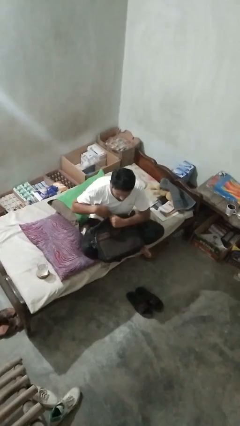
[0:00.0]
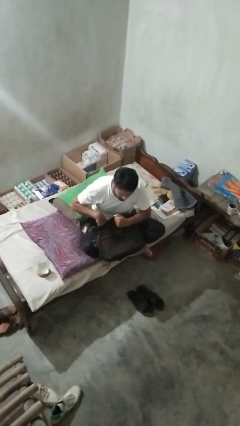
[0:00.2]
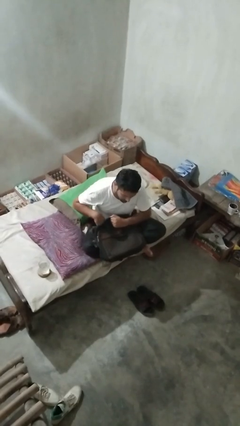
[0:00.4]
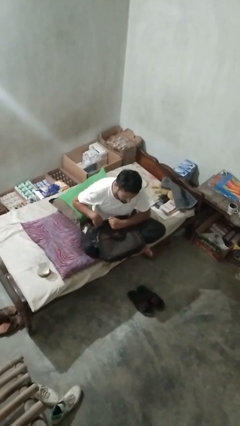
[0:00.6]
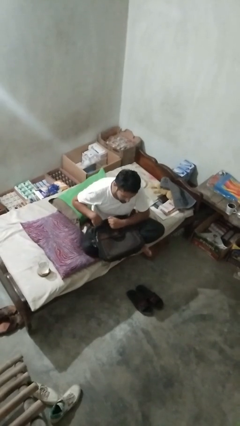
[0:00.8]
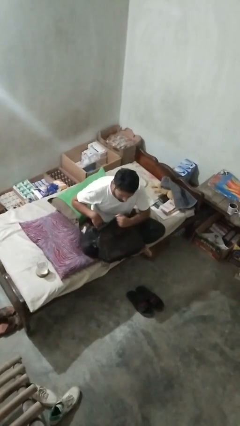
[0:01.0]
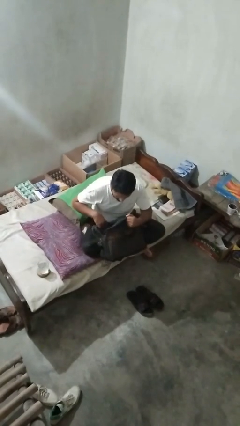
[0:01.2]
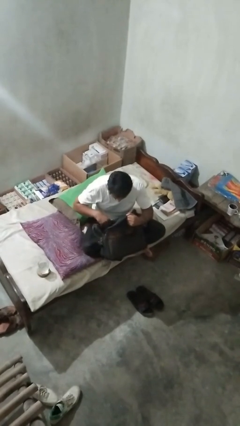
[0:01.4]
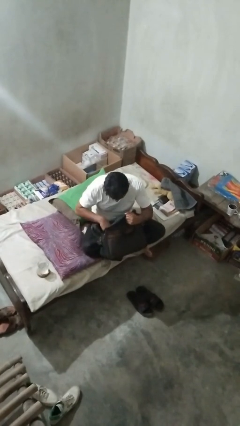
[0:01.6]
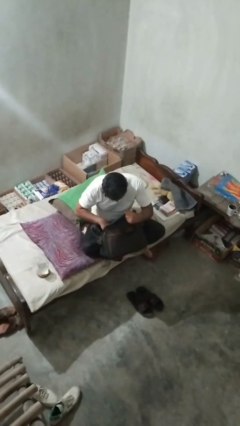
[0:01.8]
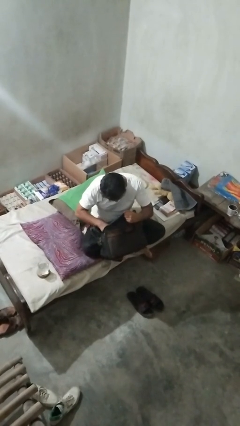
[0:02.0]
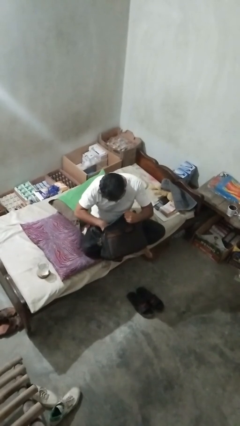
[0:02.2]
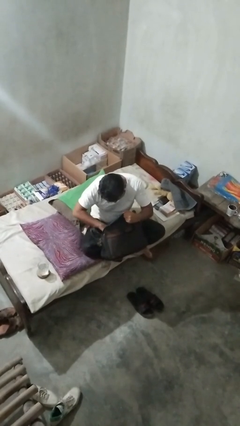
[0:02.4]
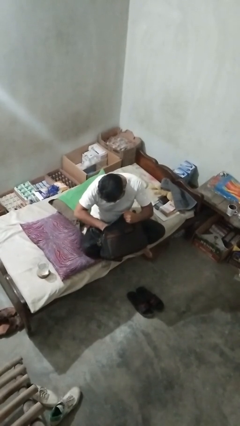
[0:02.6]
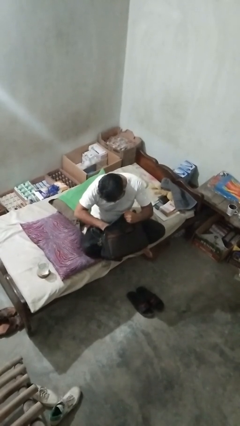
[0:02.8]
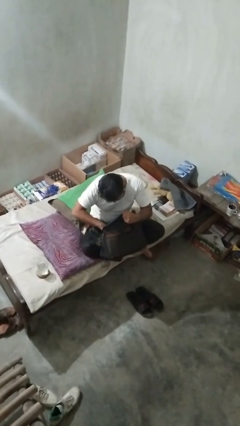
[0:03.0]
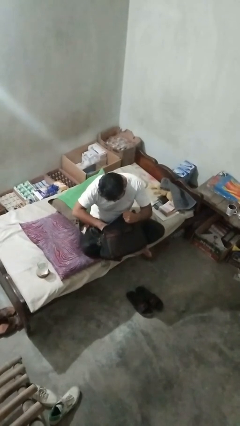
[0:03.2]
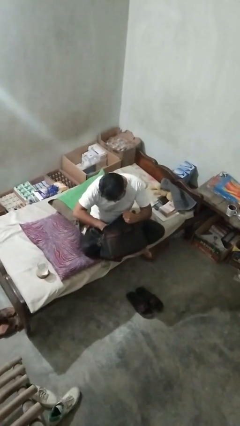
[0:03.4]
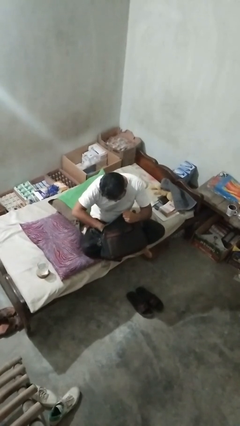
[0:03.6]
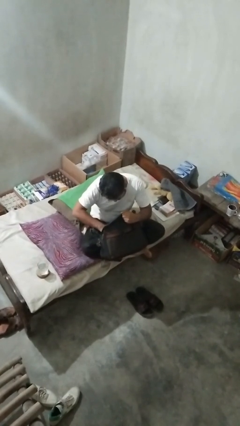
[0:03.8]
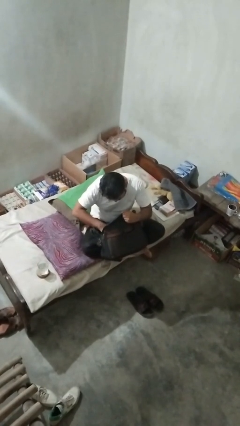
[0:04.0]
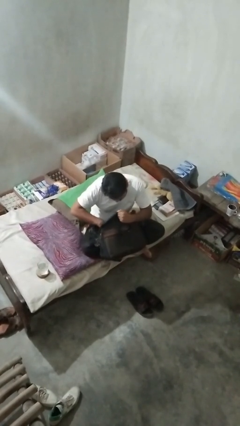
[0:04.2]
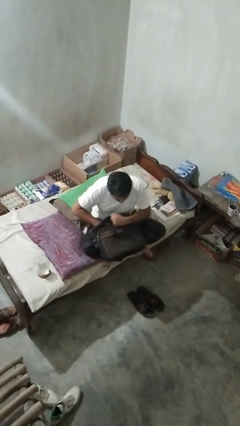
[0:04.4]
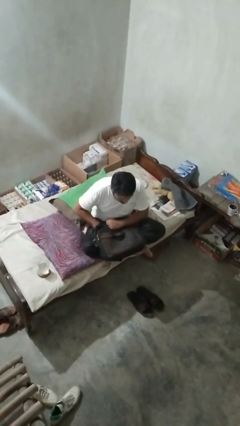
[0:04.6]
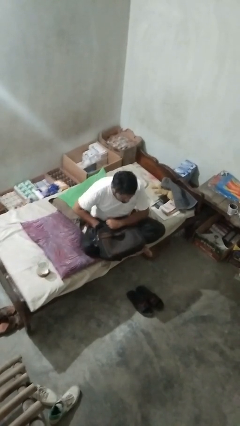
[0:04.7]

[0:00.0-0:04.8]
person searches in bag

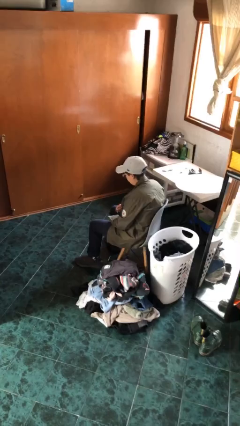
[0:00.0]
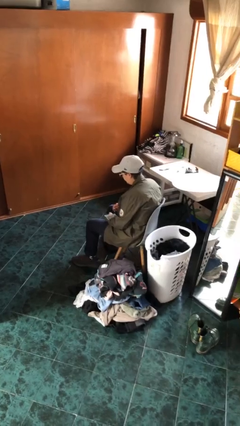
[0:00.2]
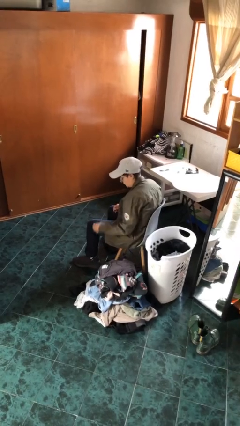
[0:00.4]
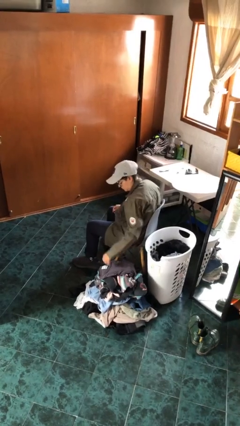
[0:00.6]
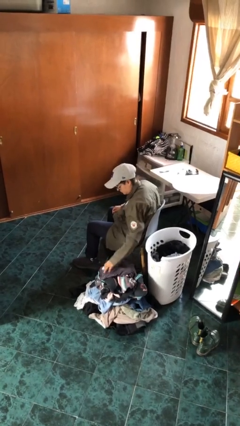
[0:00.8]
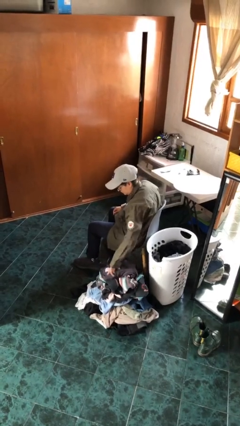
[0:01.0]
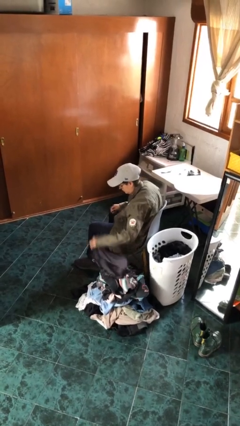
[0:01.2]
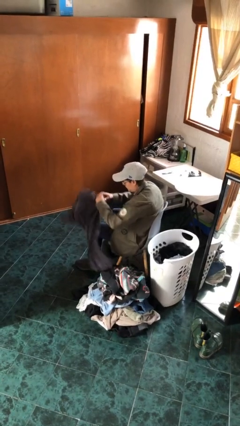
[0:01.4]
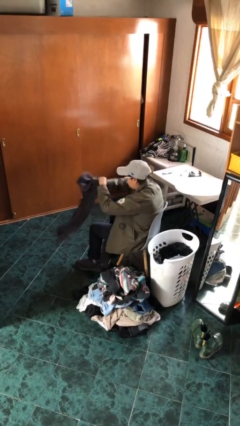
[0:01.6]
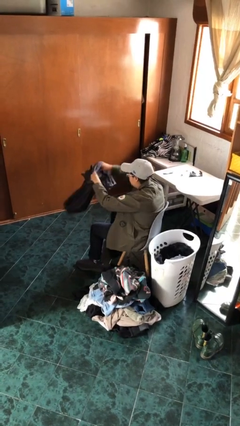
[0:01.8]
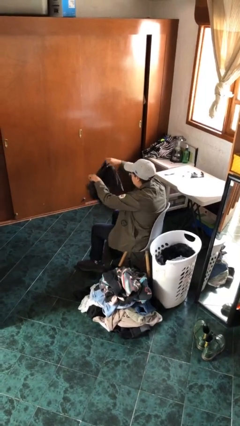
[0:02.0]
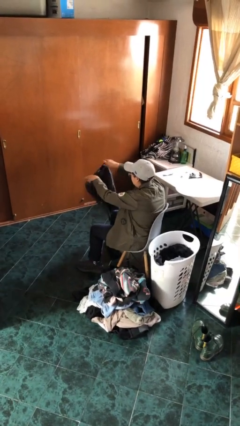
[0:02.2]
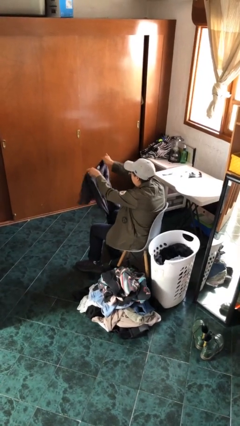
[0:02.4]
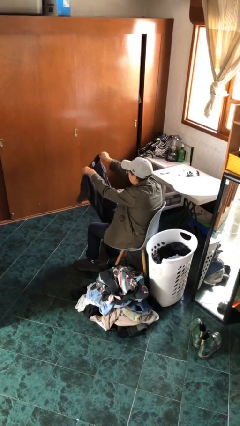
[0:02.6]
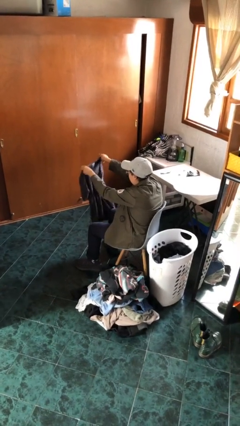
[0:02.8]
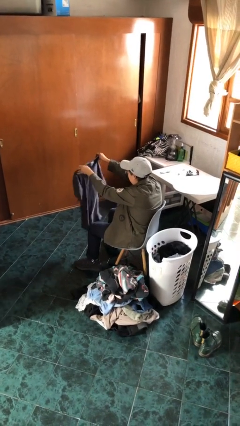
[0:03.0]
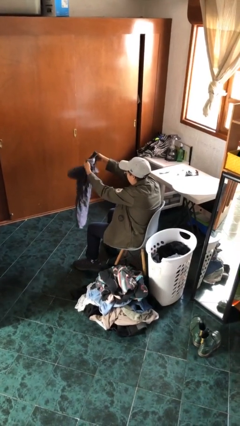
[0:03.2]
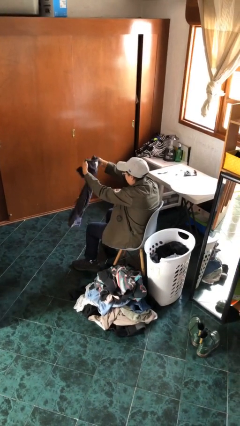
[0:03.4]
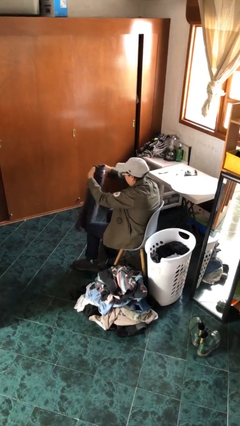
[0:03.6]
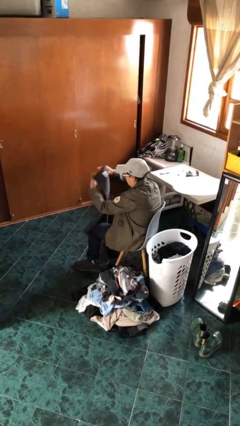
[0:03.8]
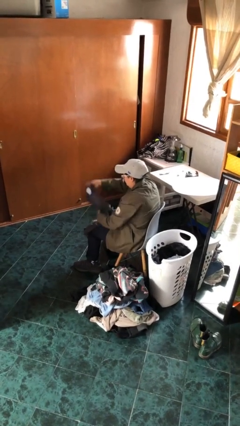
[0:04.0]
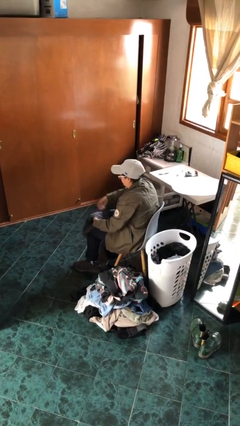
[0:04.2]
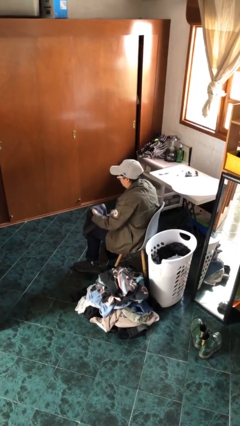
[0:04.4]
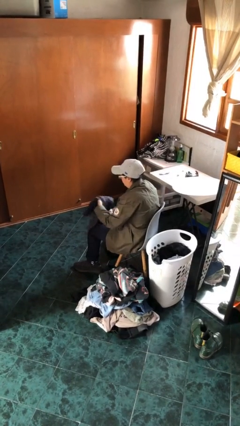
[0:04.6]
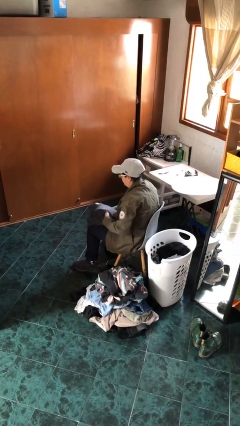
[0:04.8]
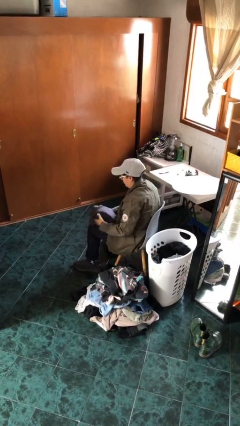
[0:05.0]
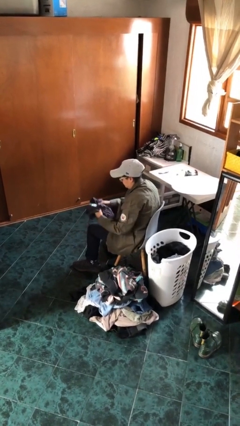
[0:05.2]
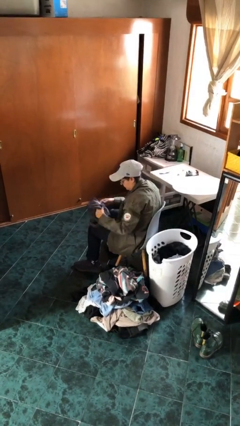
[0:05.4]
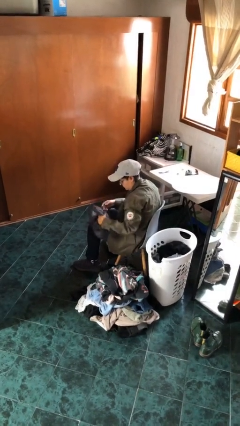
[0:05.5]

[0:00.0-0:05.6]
person folds shirt

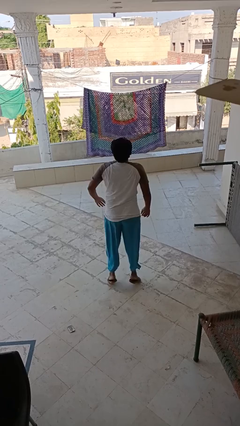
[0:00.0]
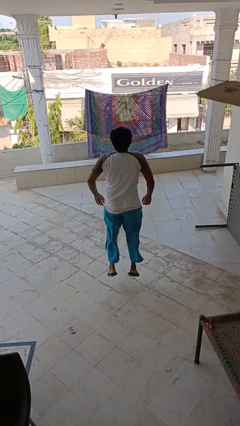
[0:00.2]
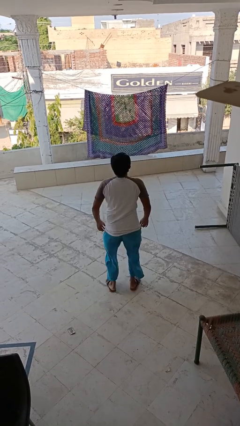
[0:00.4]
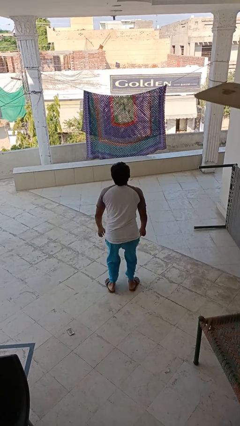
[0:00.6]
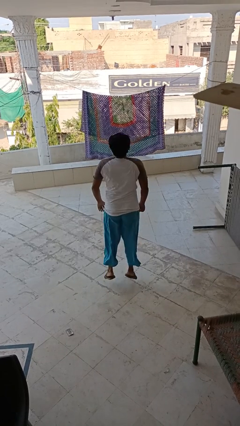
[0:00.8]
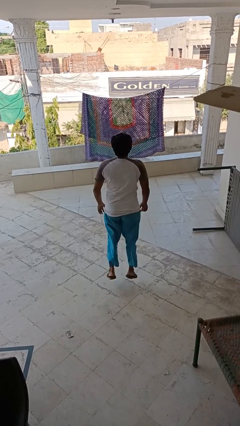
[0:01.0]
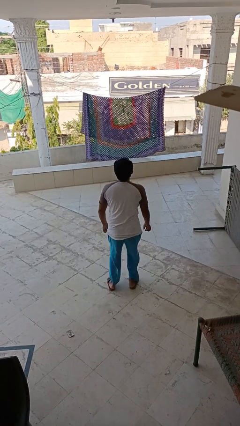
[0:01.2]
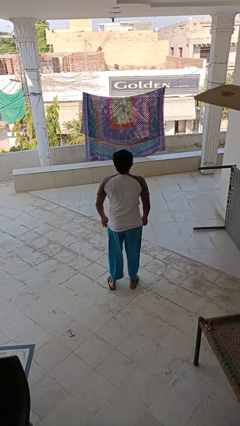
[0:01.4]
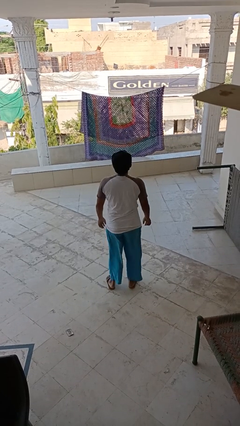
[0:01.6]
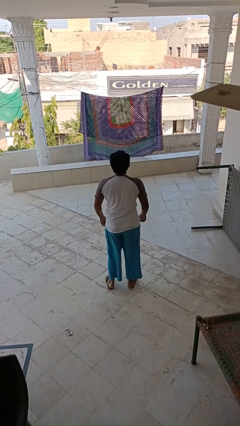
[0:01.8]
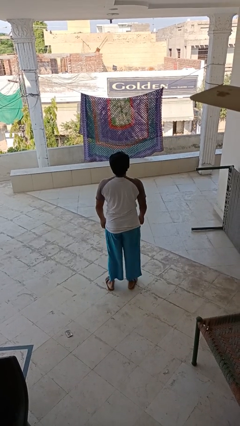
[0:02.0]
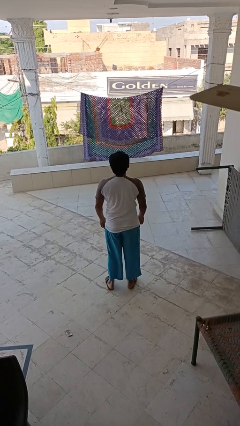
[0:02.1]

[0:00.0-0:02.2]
person jumps

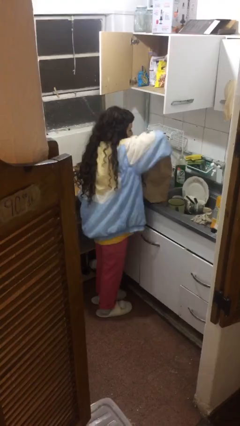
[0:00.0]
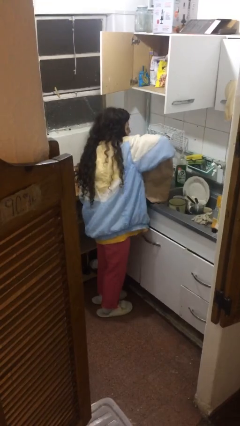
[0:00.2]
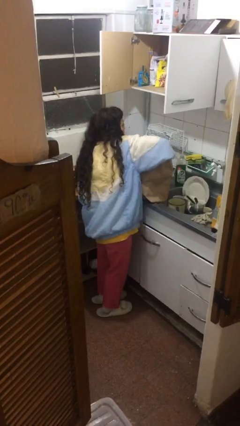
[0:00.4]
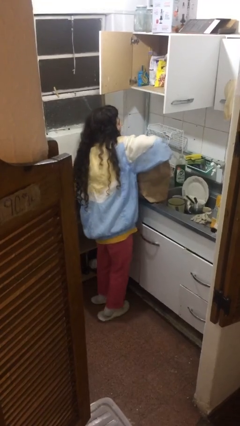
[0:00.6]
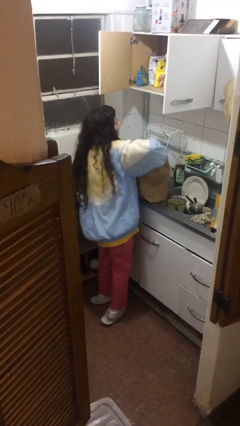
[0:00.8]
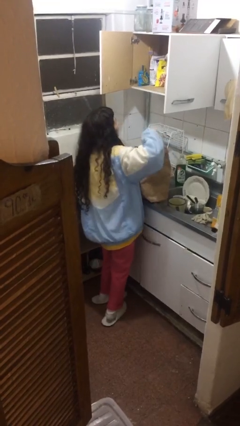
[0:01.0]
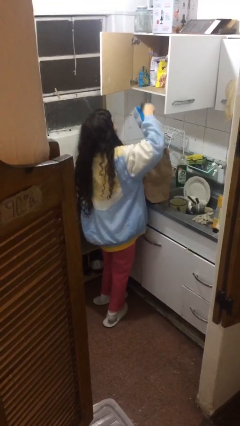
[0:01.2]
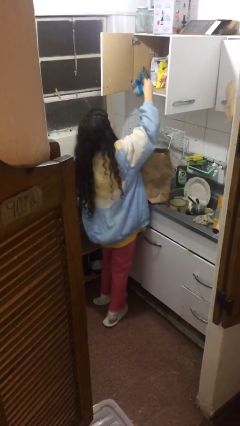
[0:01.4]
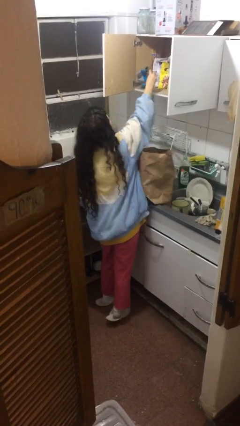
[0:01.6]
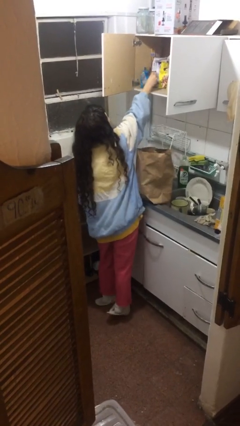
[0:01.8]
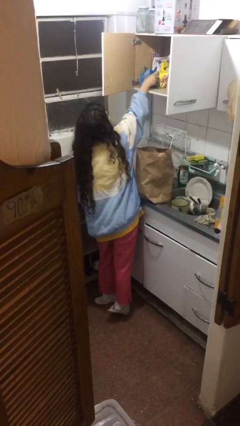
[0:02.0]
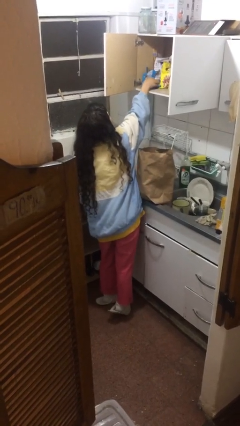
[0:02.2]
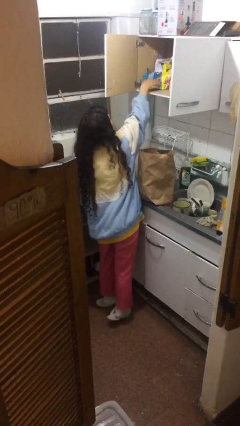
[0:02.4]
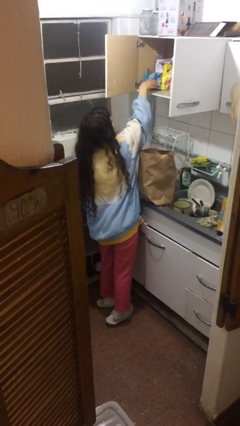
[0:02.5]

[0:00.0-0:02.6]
person loads groceries into cabinet

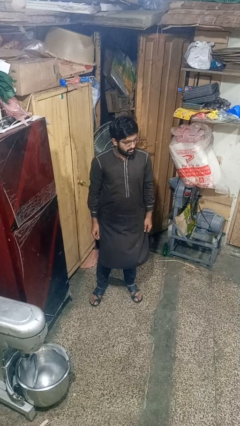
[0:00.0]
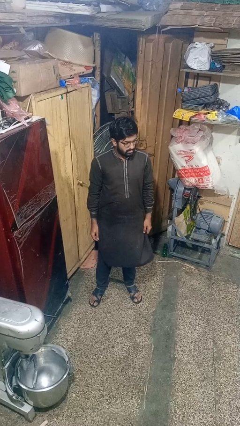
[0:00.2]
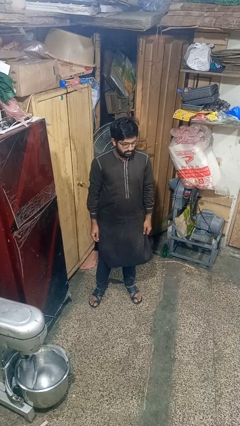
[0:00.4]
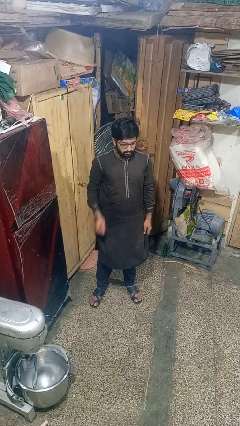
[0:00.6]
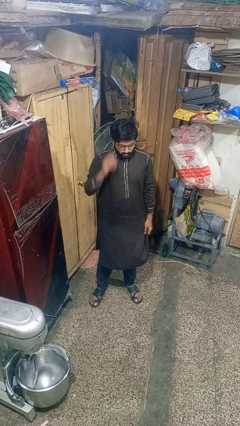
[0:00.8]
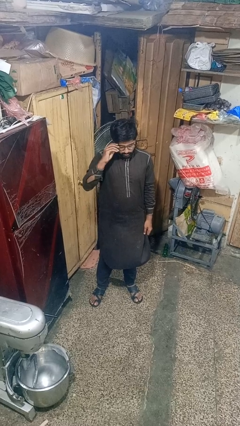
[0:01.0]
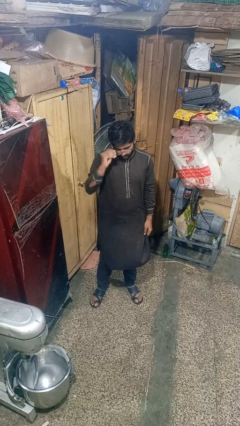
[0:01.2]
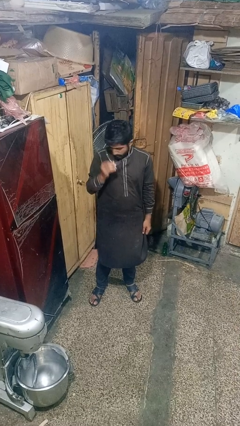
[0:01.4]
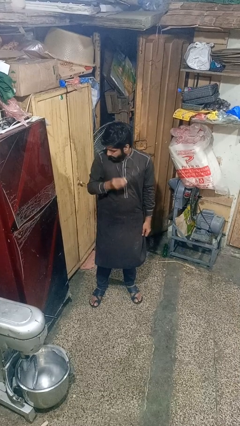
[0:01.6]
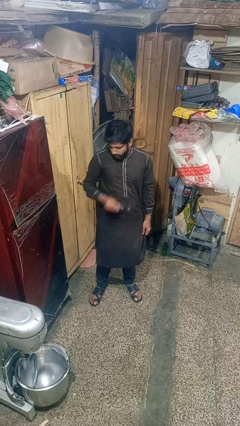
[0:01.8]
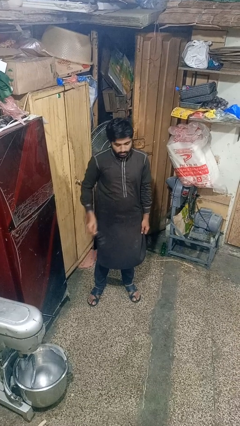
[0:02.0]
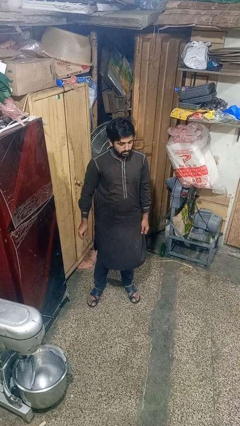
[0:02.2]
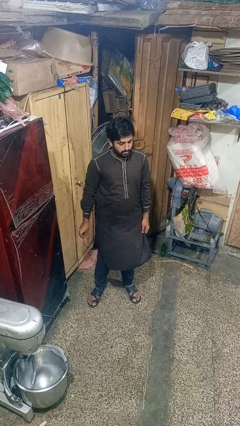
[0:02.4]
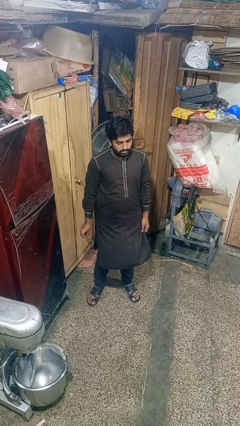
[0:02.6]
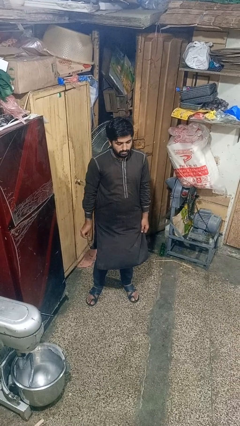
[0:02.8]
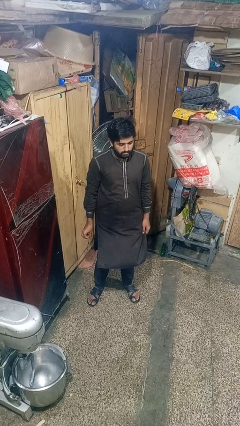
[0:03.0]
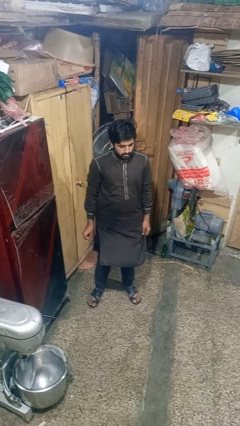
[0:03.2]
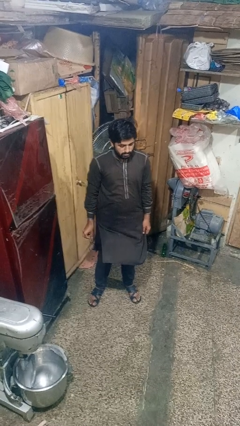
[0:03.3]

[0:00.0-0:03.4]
person takes off glasses
